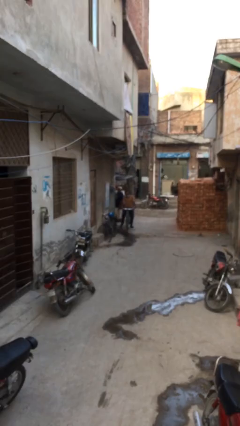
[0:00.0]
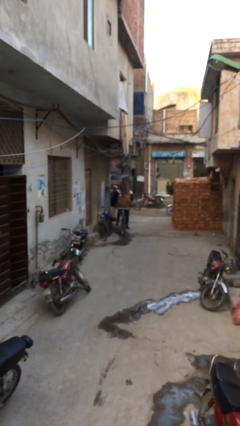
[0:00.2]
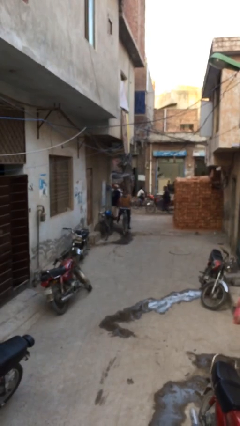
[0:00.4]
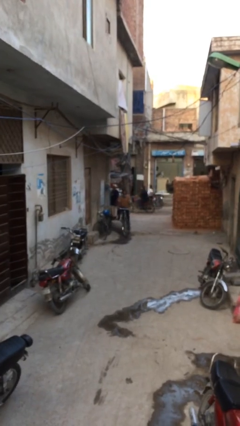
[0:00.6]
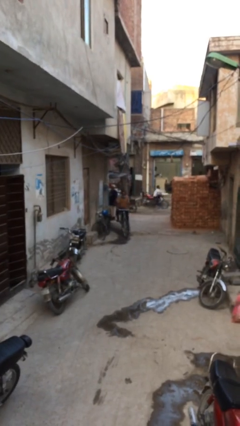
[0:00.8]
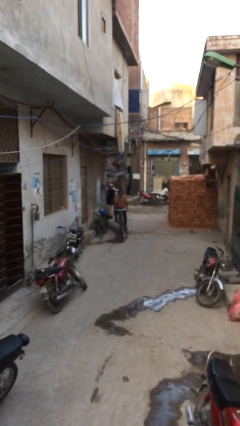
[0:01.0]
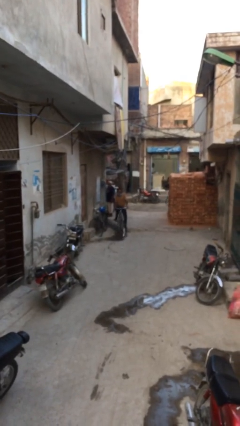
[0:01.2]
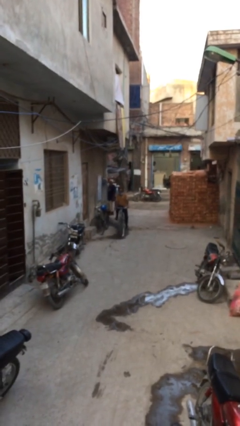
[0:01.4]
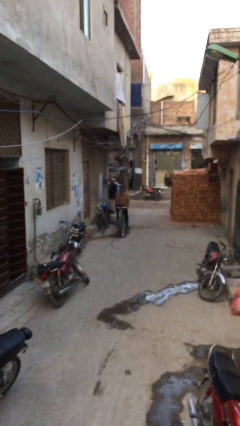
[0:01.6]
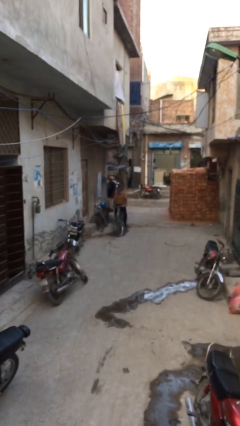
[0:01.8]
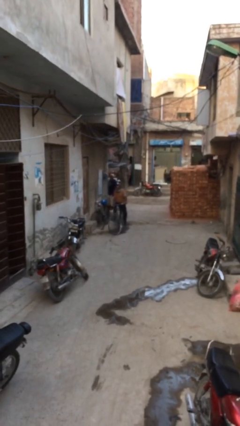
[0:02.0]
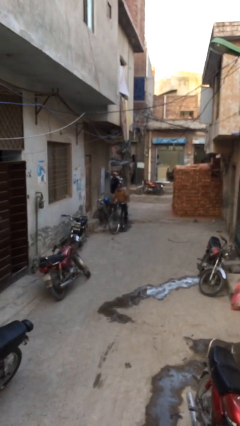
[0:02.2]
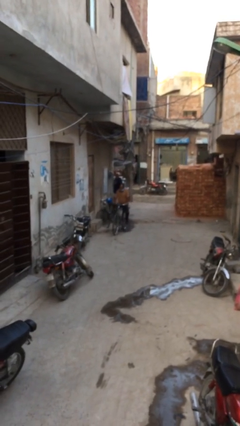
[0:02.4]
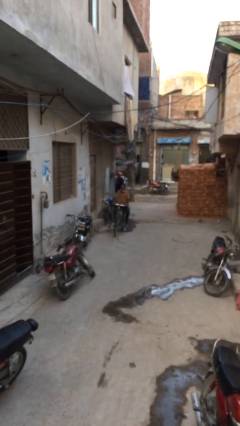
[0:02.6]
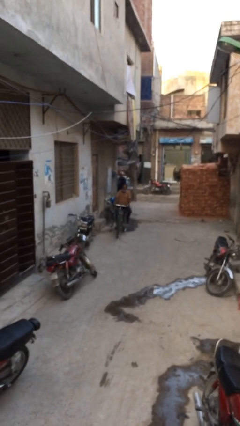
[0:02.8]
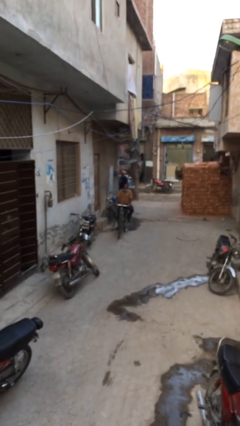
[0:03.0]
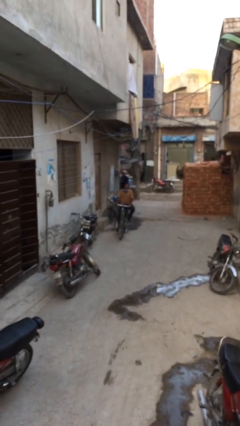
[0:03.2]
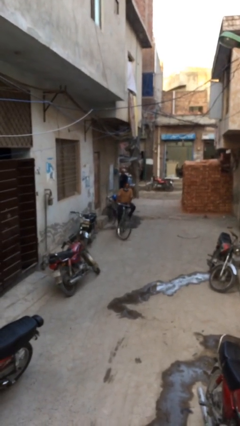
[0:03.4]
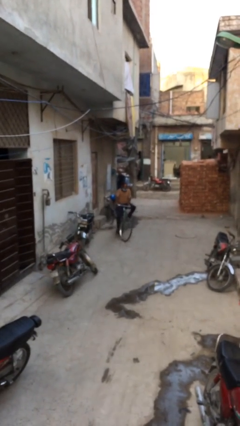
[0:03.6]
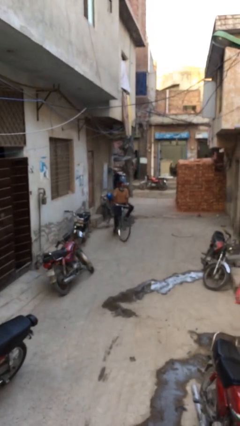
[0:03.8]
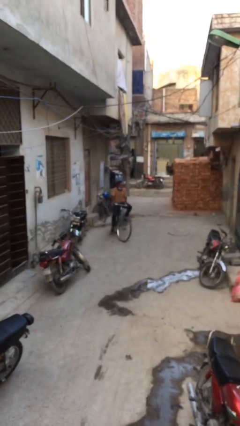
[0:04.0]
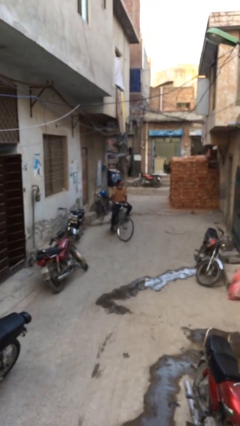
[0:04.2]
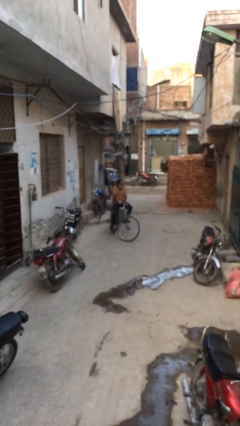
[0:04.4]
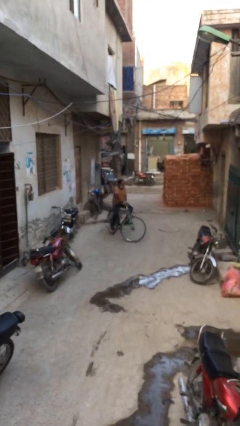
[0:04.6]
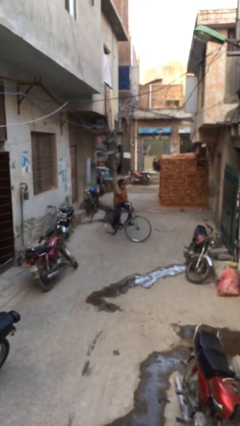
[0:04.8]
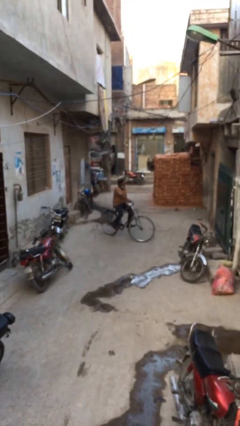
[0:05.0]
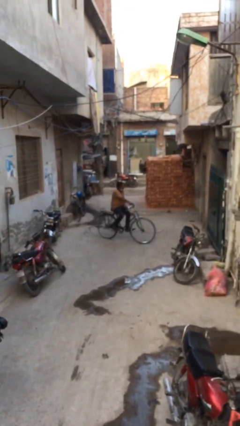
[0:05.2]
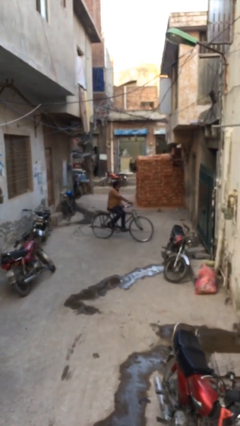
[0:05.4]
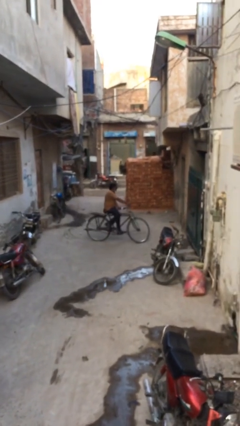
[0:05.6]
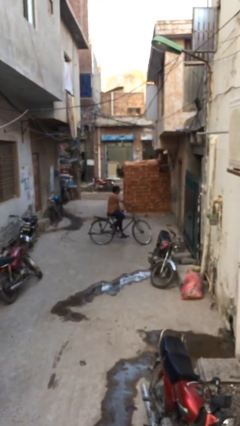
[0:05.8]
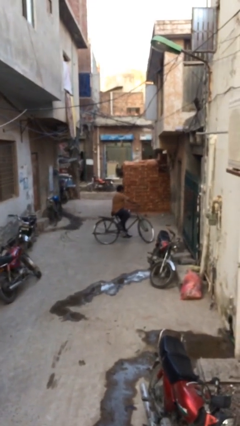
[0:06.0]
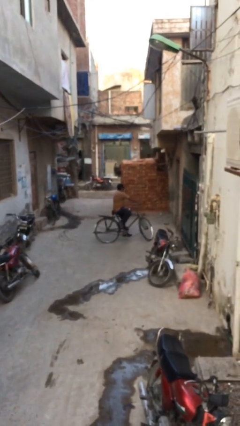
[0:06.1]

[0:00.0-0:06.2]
person rides bicycle

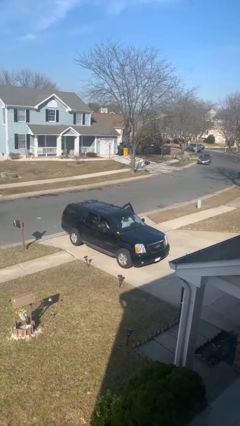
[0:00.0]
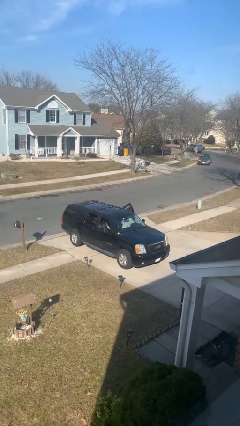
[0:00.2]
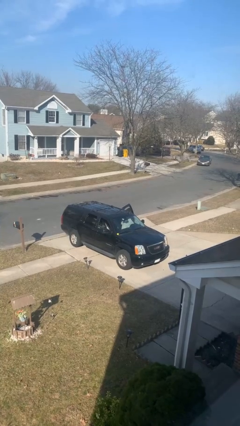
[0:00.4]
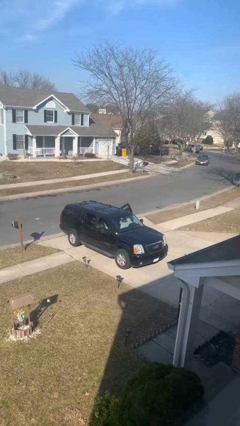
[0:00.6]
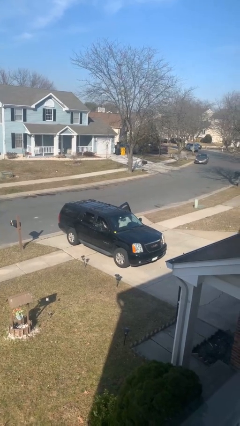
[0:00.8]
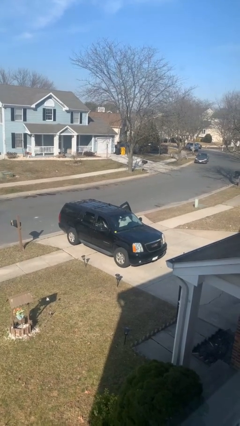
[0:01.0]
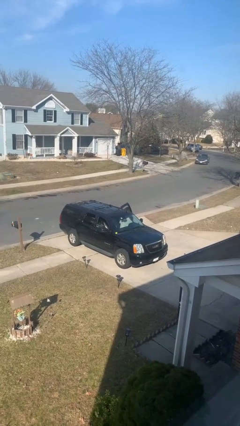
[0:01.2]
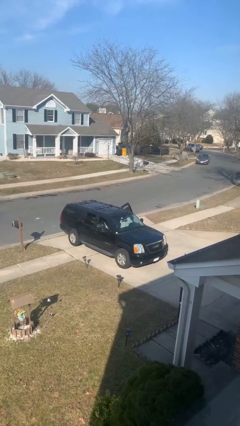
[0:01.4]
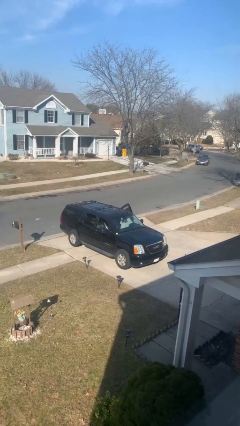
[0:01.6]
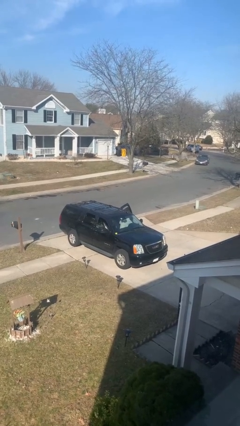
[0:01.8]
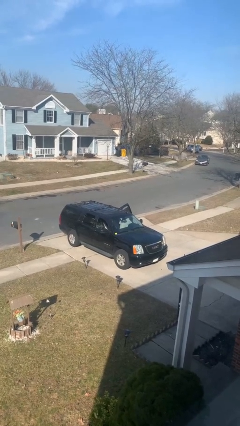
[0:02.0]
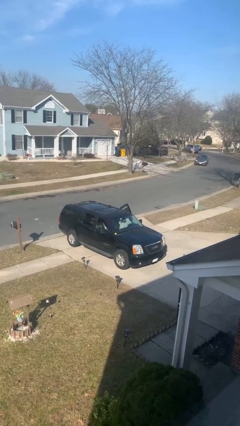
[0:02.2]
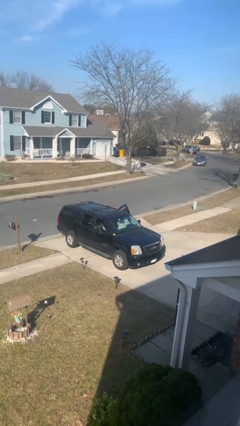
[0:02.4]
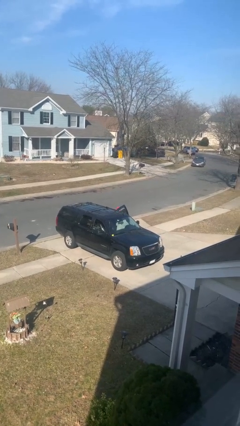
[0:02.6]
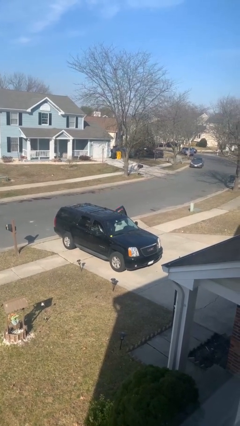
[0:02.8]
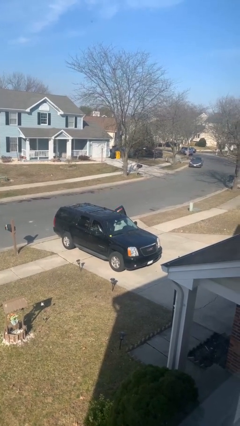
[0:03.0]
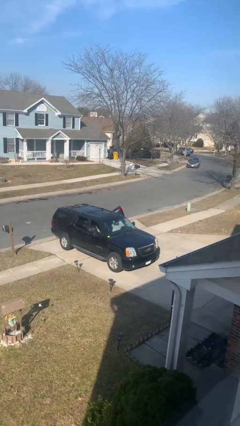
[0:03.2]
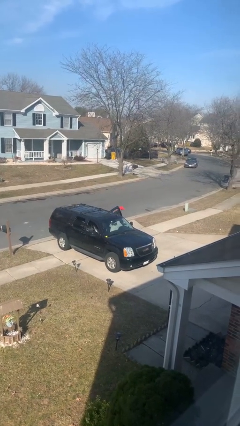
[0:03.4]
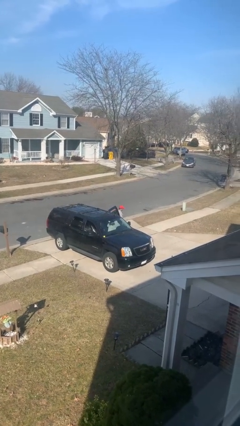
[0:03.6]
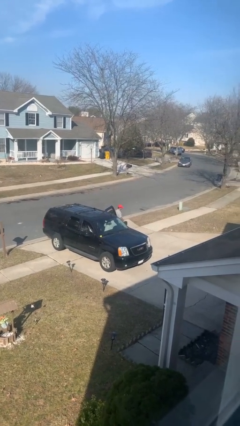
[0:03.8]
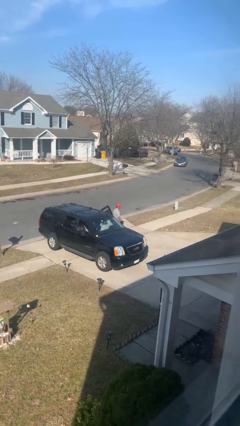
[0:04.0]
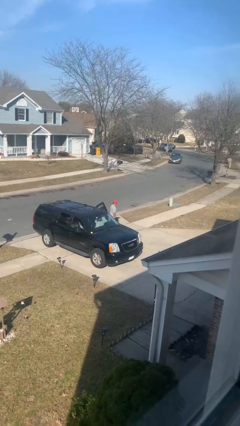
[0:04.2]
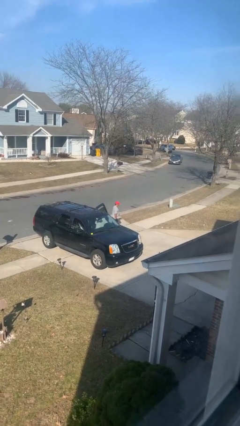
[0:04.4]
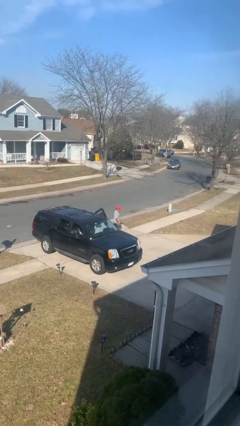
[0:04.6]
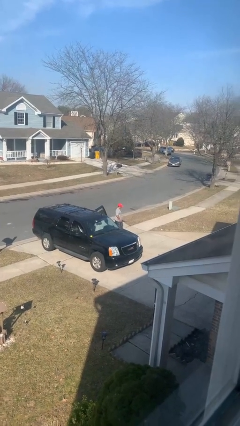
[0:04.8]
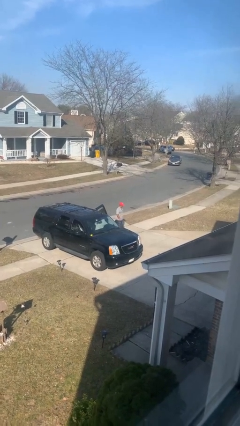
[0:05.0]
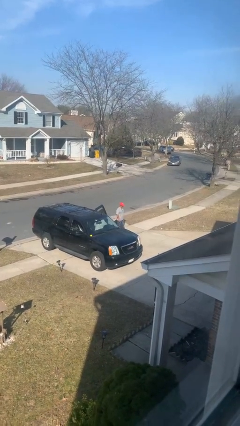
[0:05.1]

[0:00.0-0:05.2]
person exits car

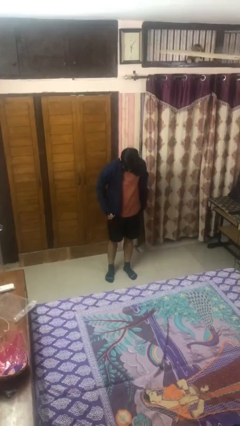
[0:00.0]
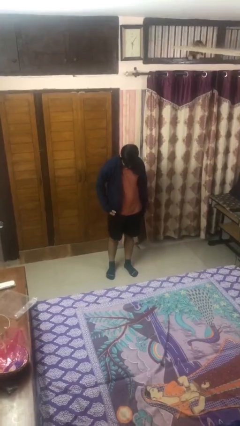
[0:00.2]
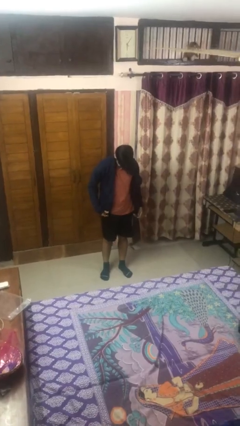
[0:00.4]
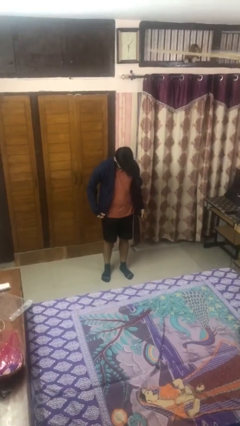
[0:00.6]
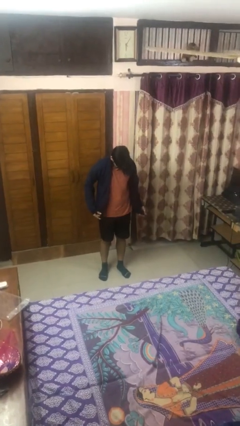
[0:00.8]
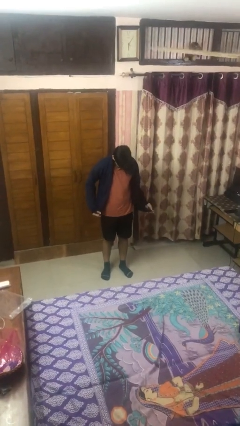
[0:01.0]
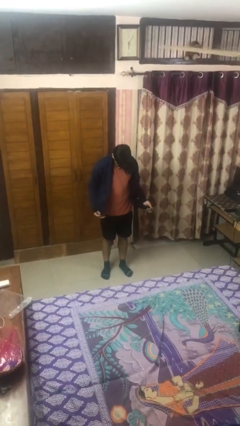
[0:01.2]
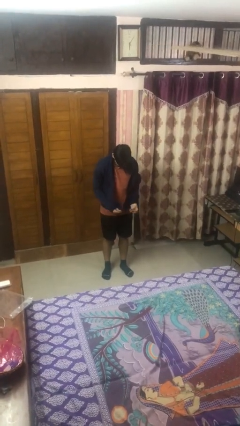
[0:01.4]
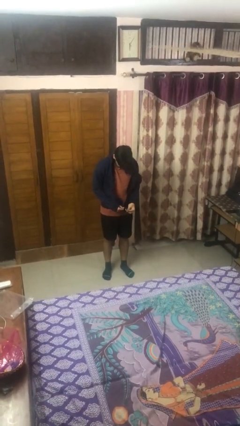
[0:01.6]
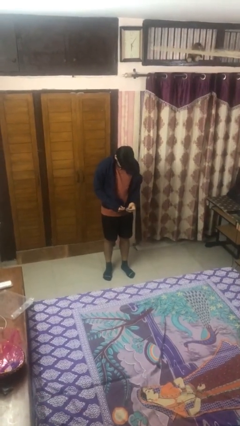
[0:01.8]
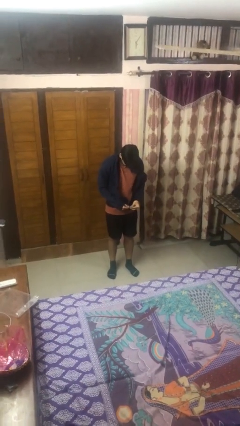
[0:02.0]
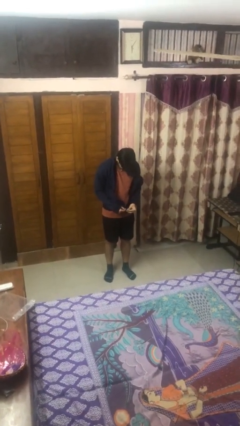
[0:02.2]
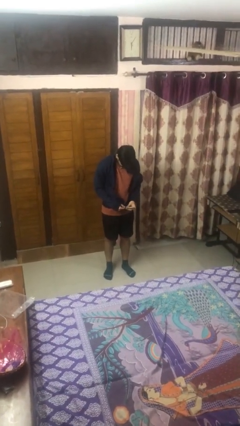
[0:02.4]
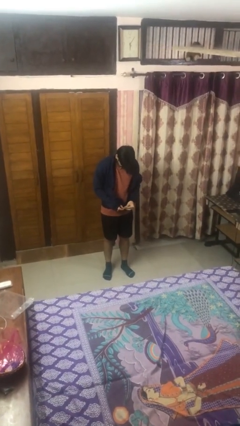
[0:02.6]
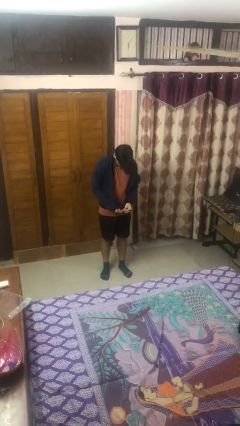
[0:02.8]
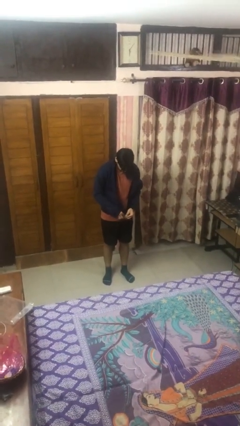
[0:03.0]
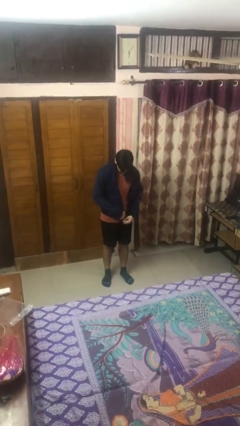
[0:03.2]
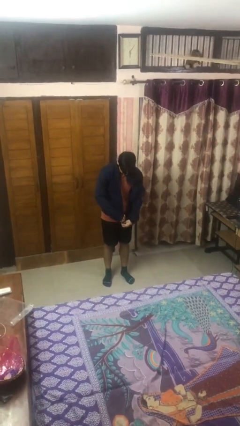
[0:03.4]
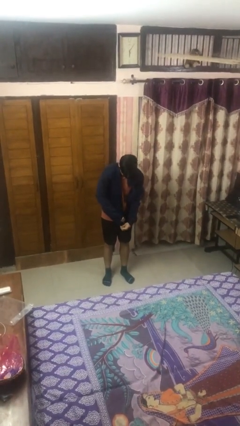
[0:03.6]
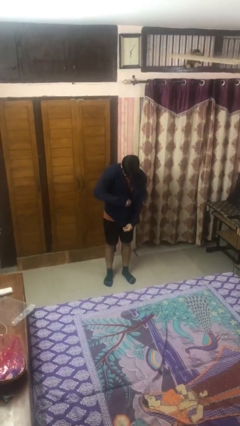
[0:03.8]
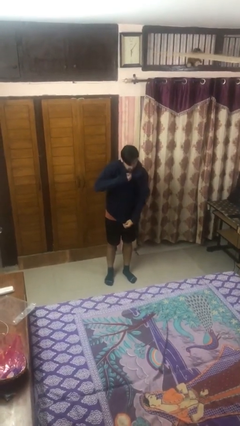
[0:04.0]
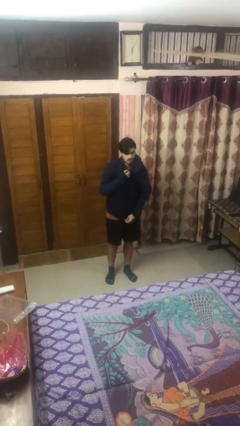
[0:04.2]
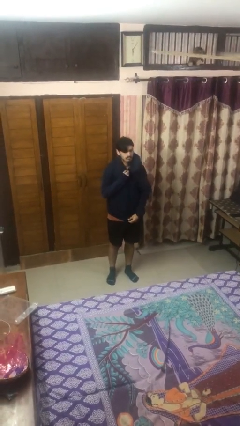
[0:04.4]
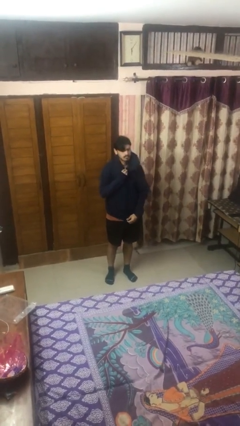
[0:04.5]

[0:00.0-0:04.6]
person zips up jacket

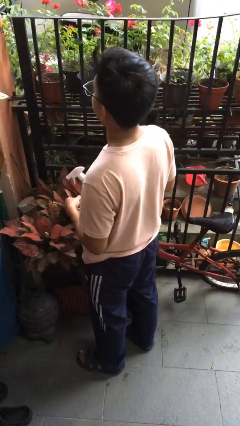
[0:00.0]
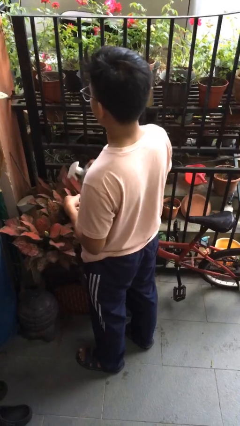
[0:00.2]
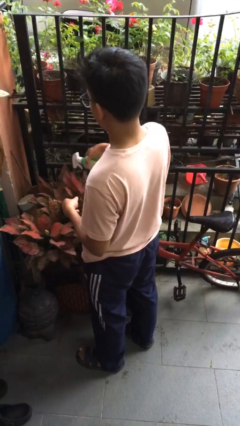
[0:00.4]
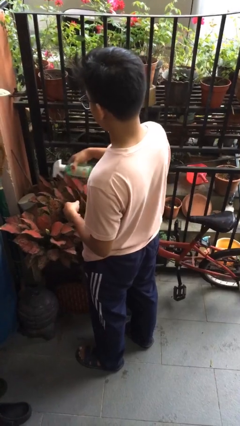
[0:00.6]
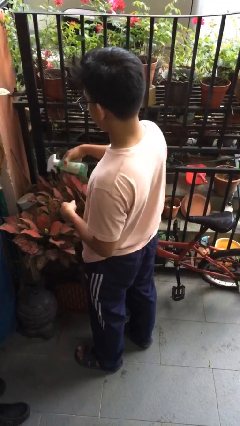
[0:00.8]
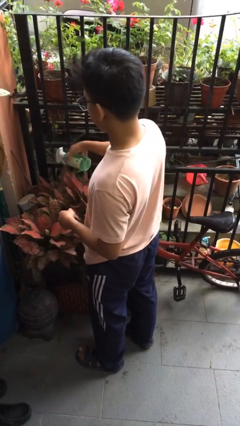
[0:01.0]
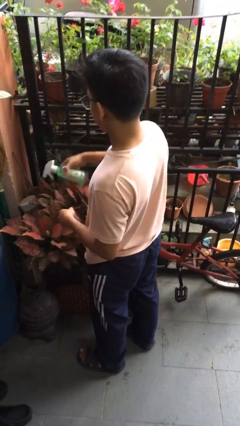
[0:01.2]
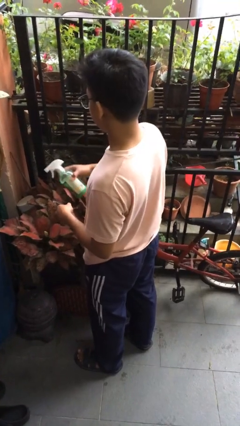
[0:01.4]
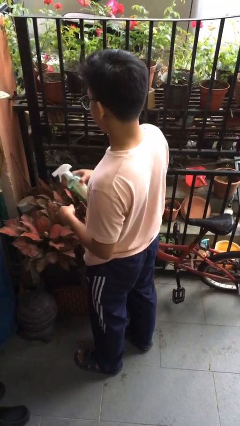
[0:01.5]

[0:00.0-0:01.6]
person waters houseplant
